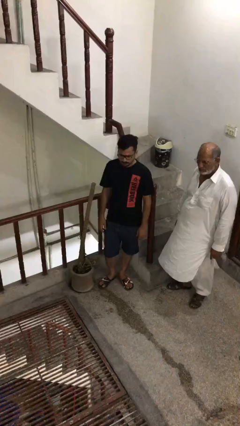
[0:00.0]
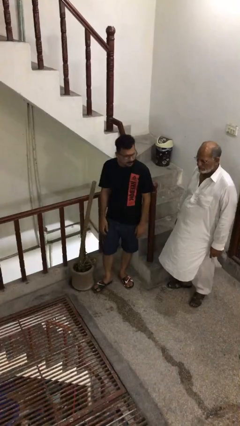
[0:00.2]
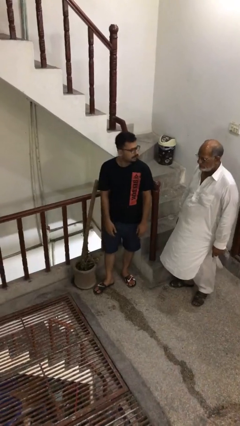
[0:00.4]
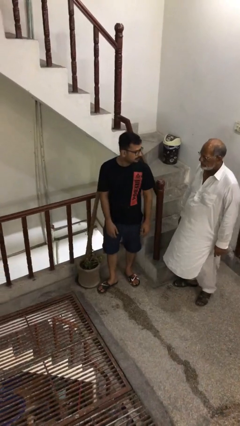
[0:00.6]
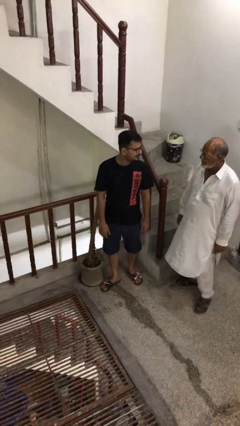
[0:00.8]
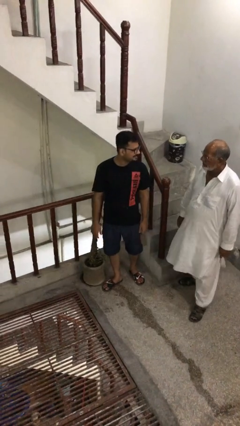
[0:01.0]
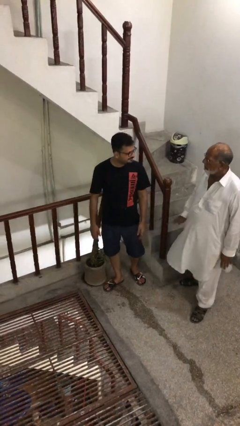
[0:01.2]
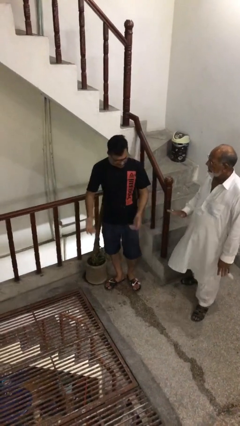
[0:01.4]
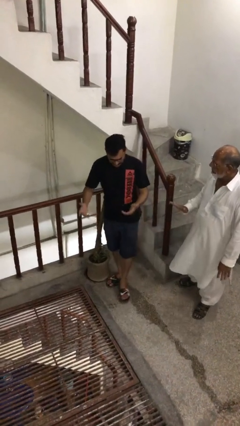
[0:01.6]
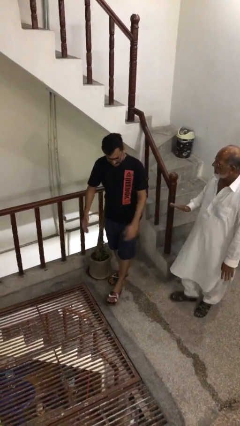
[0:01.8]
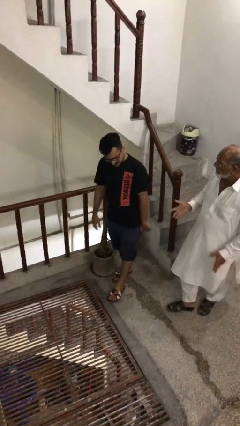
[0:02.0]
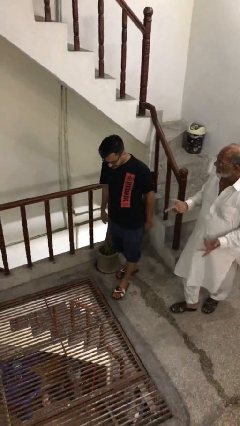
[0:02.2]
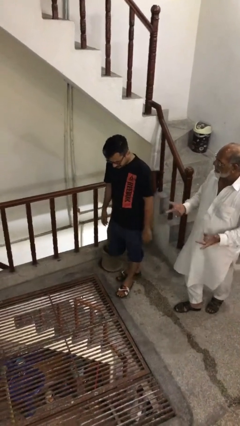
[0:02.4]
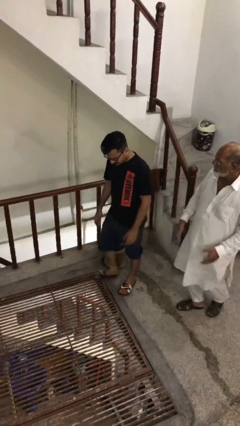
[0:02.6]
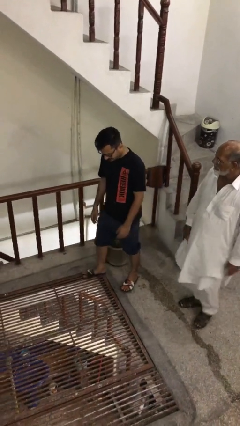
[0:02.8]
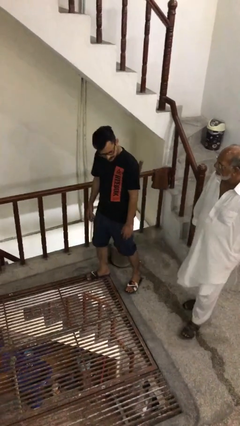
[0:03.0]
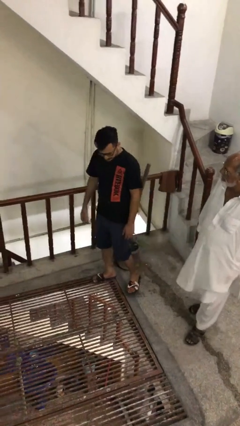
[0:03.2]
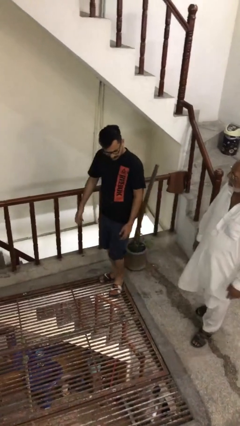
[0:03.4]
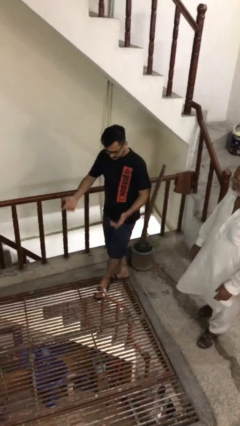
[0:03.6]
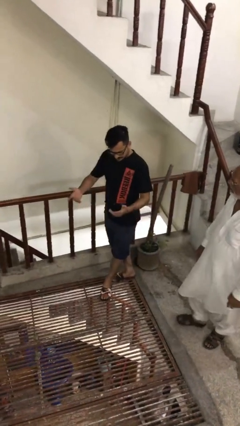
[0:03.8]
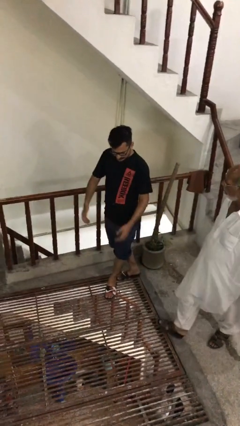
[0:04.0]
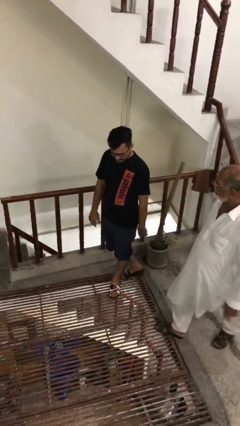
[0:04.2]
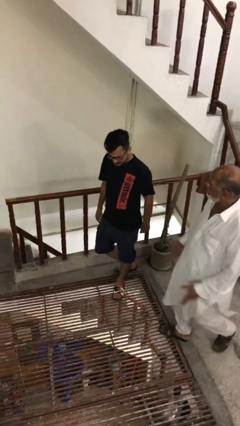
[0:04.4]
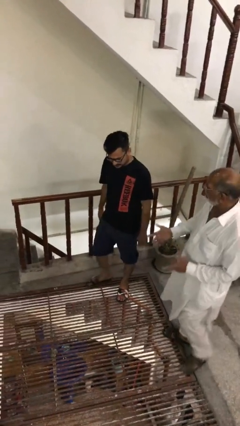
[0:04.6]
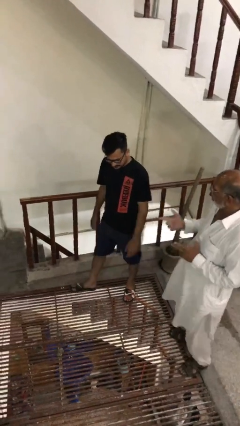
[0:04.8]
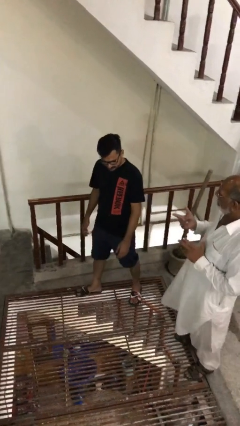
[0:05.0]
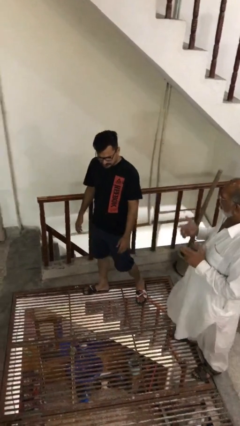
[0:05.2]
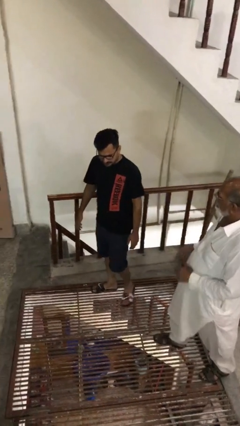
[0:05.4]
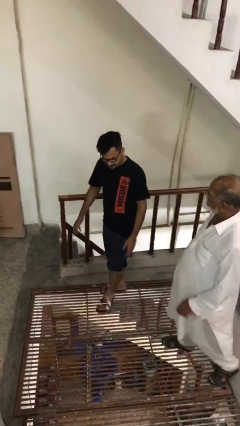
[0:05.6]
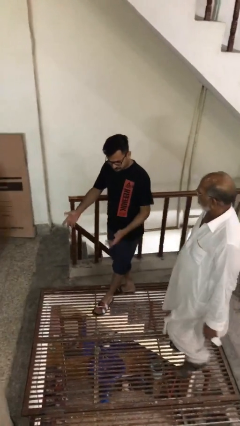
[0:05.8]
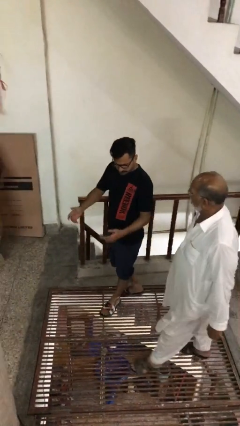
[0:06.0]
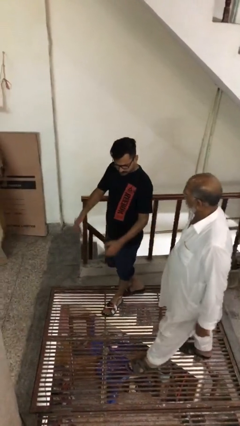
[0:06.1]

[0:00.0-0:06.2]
person talks to person

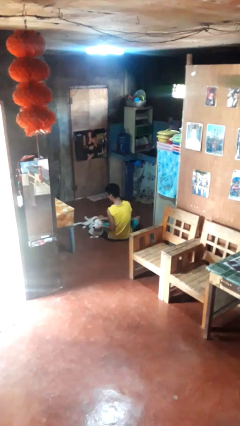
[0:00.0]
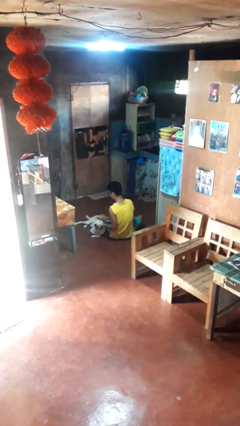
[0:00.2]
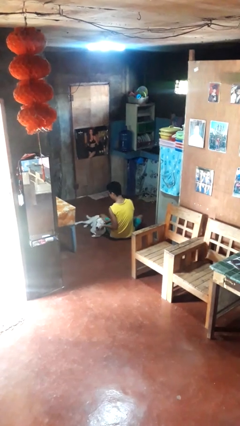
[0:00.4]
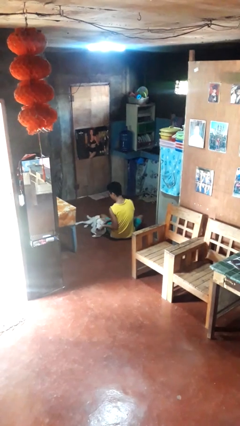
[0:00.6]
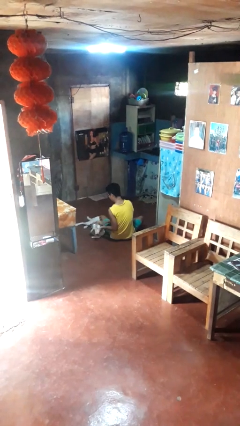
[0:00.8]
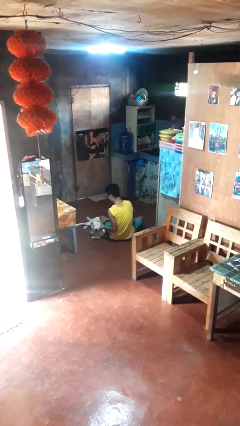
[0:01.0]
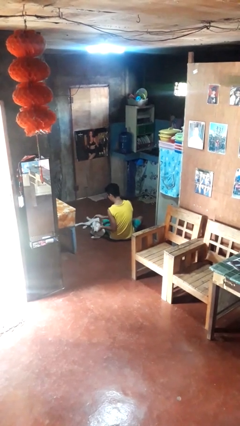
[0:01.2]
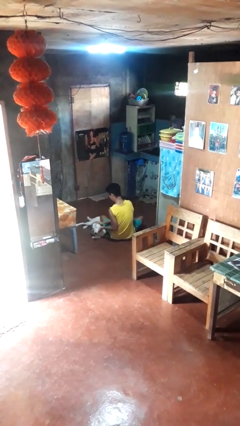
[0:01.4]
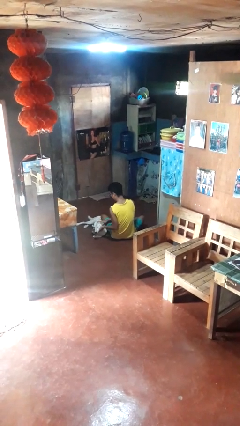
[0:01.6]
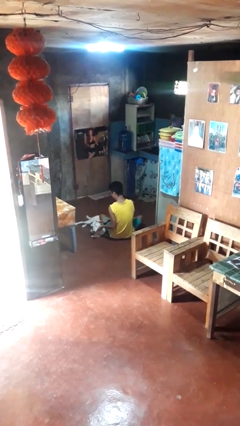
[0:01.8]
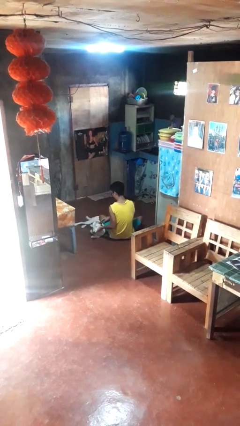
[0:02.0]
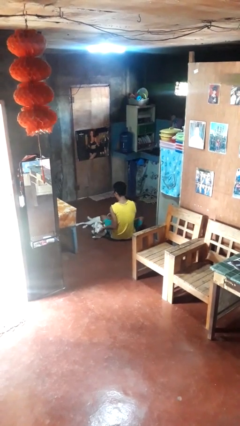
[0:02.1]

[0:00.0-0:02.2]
person pets dog

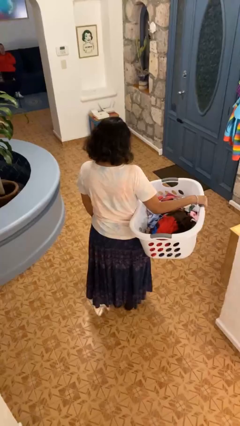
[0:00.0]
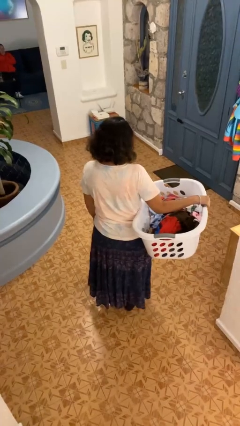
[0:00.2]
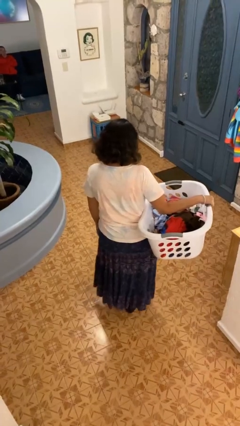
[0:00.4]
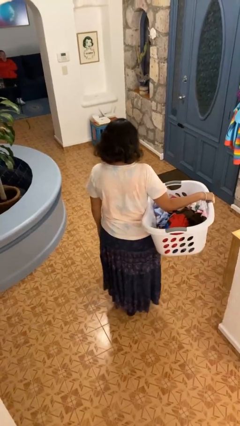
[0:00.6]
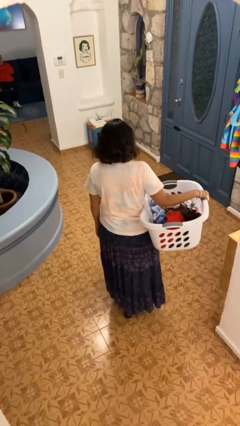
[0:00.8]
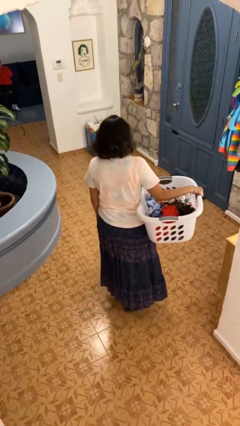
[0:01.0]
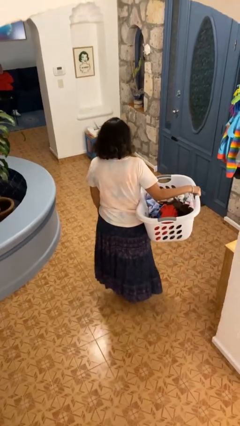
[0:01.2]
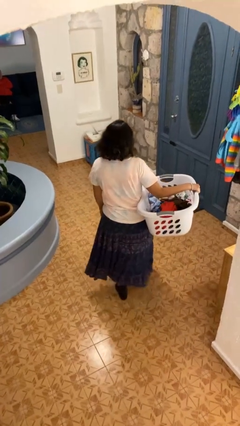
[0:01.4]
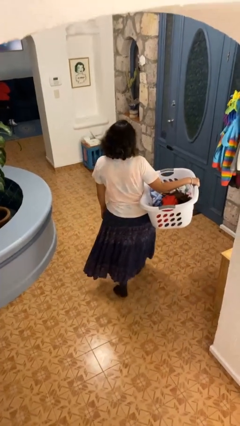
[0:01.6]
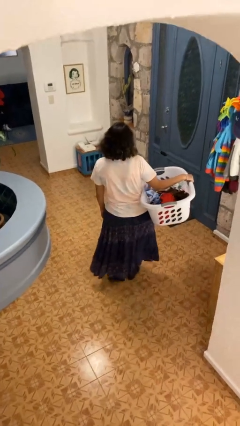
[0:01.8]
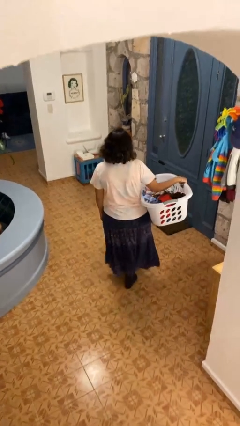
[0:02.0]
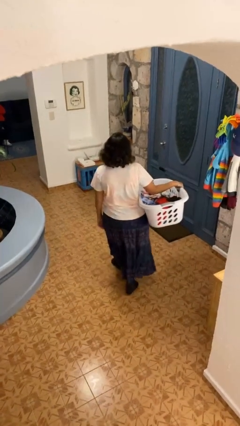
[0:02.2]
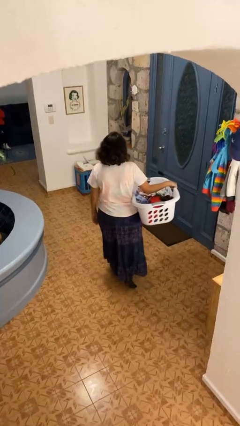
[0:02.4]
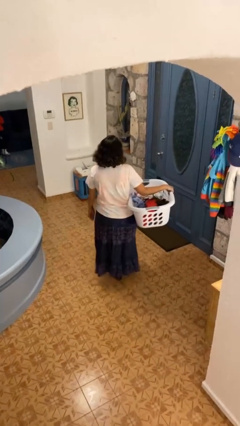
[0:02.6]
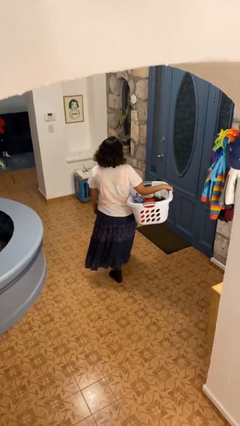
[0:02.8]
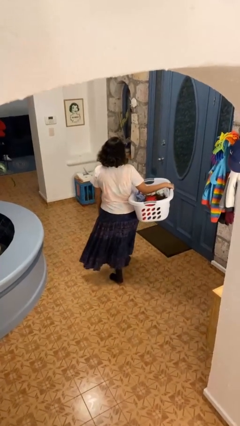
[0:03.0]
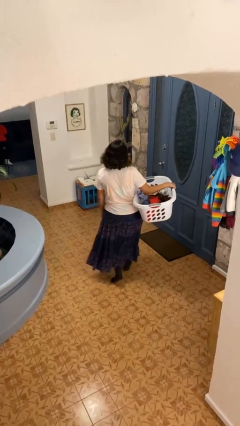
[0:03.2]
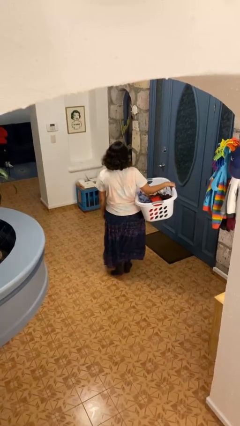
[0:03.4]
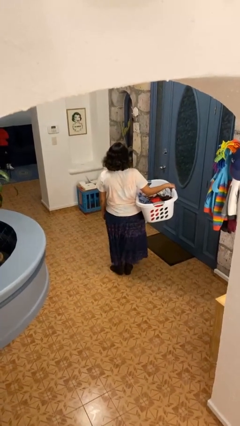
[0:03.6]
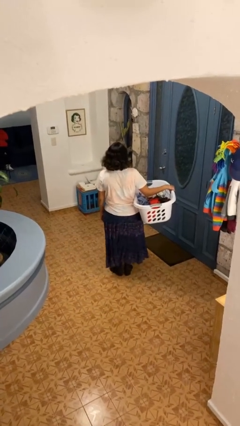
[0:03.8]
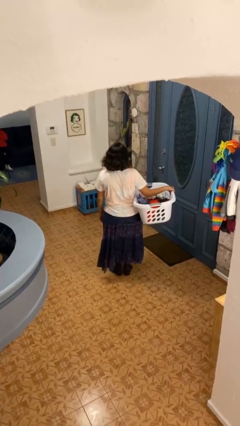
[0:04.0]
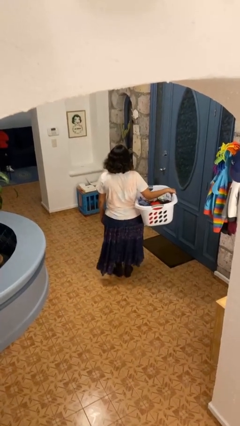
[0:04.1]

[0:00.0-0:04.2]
person carries laundry basket

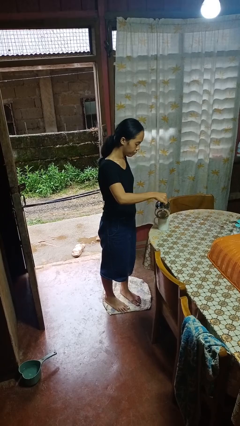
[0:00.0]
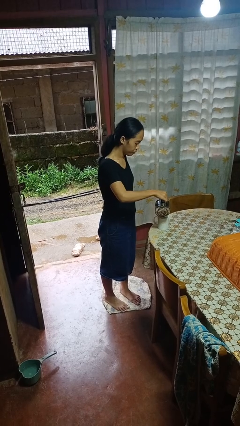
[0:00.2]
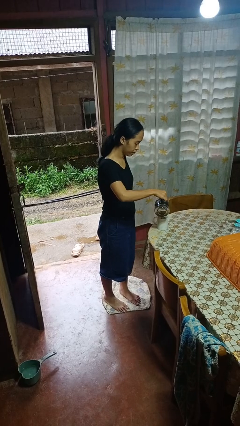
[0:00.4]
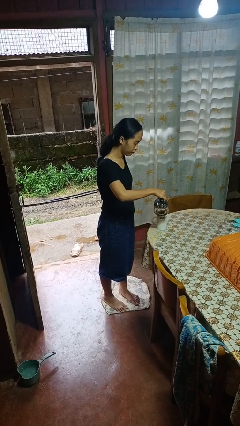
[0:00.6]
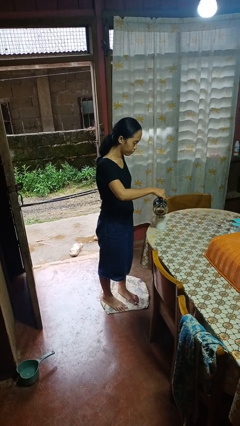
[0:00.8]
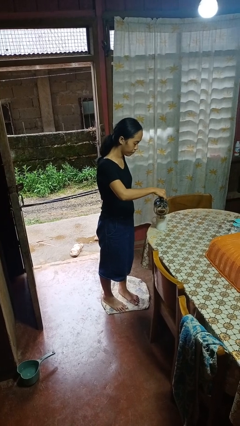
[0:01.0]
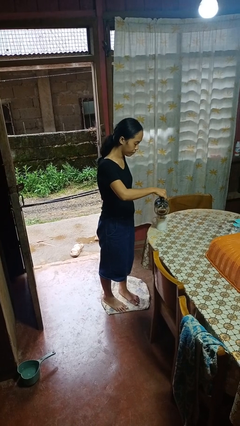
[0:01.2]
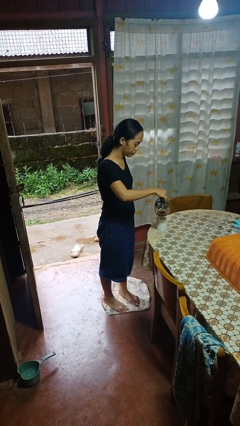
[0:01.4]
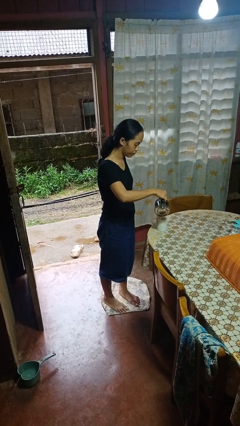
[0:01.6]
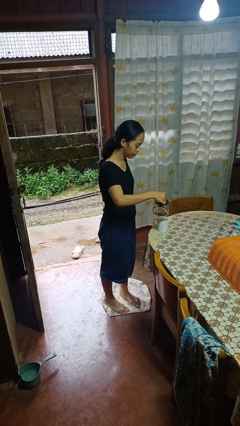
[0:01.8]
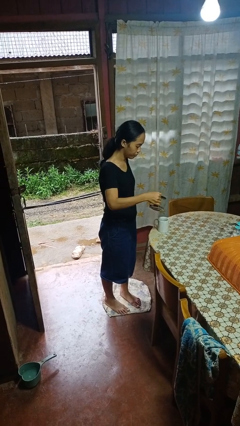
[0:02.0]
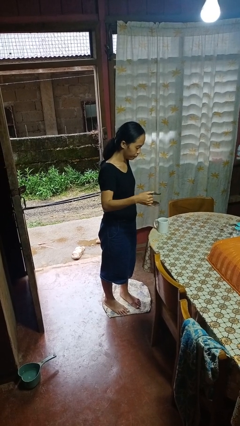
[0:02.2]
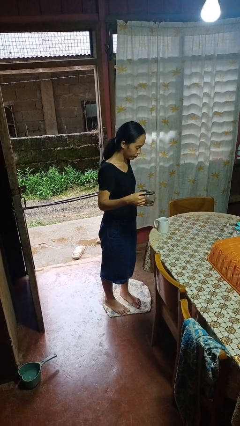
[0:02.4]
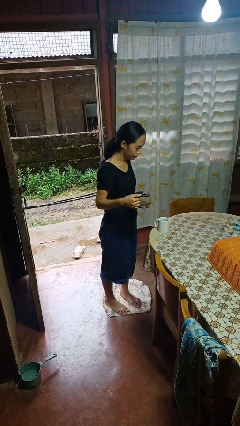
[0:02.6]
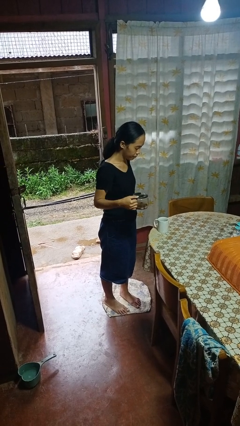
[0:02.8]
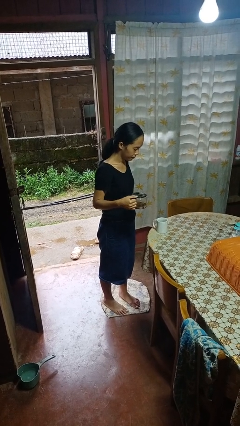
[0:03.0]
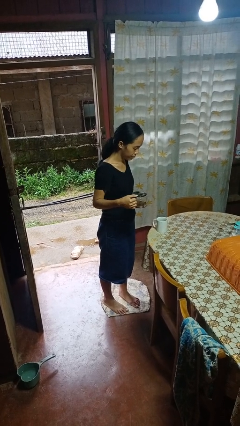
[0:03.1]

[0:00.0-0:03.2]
person pours coffee into mug

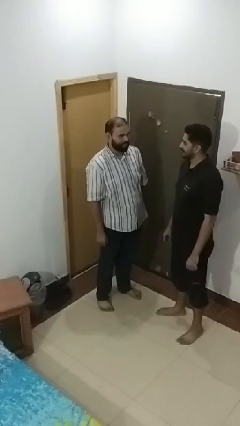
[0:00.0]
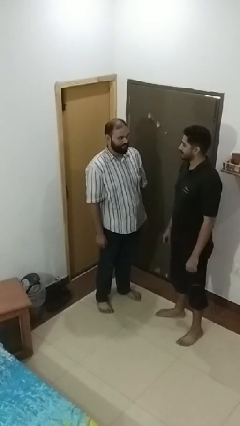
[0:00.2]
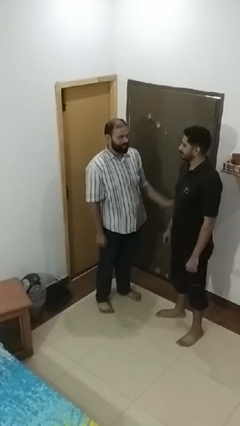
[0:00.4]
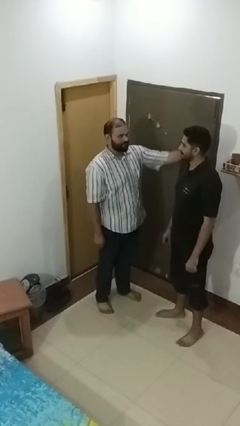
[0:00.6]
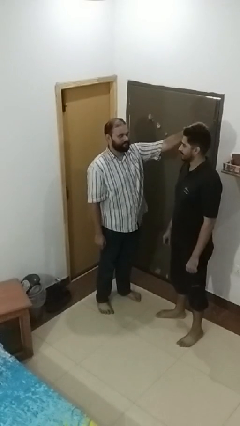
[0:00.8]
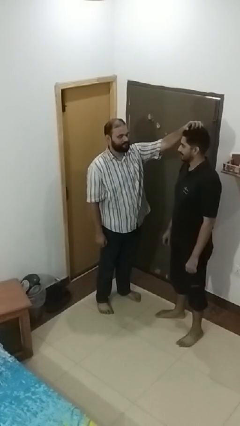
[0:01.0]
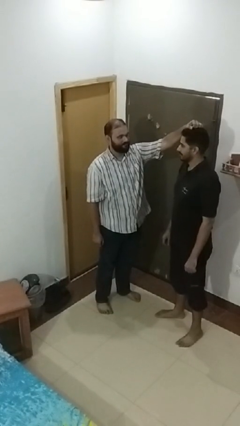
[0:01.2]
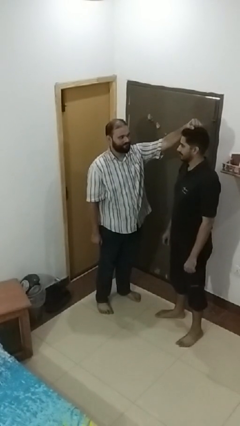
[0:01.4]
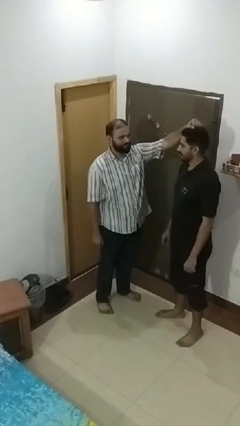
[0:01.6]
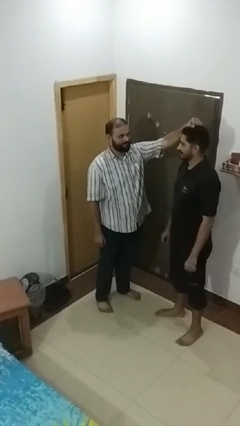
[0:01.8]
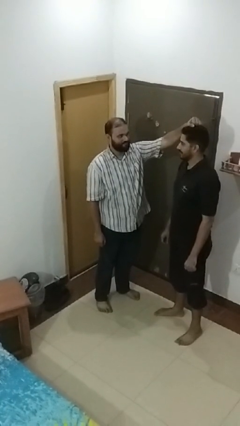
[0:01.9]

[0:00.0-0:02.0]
person grabs person by hair
